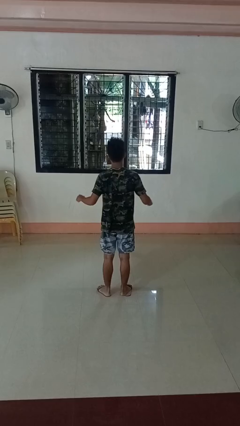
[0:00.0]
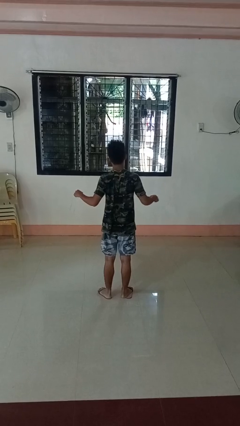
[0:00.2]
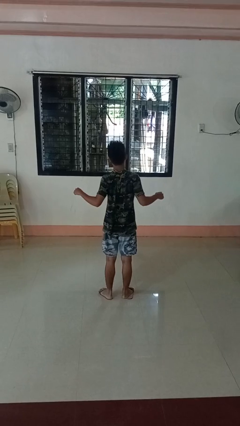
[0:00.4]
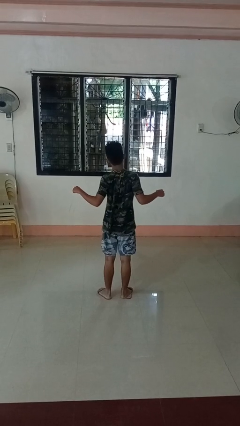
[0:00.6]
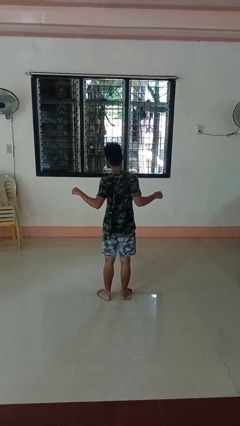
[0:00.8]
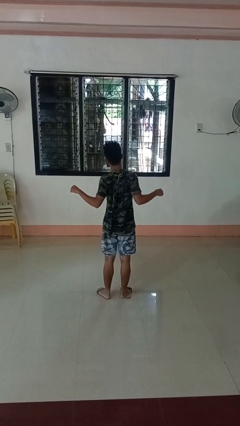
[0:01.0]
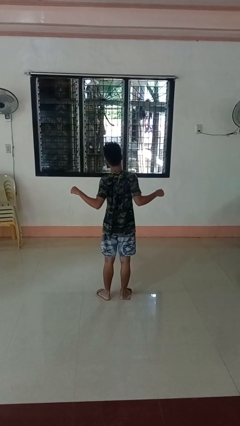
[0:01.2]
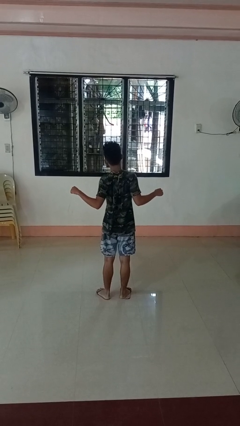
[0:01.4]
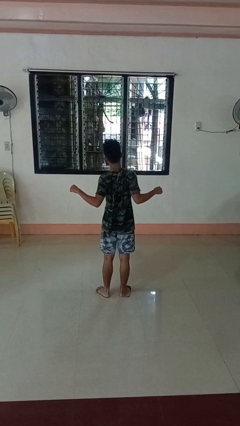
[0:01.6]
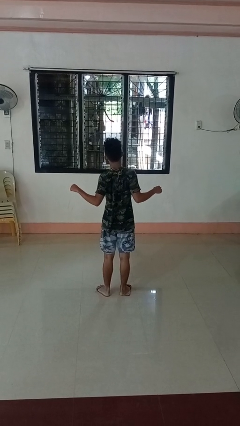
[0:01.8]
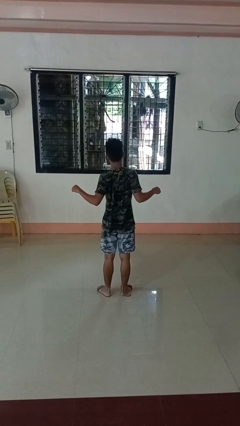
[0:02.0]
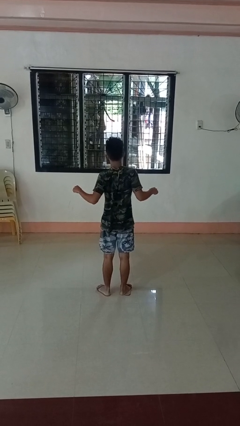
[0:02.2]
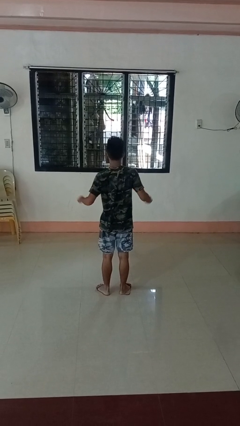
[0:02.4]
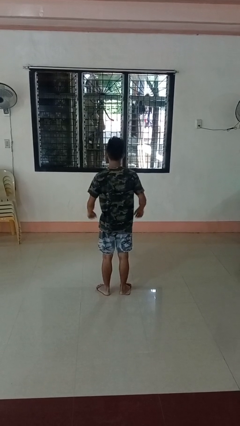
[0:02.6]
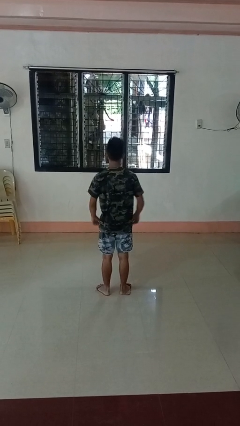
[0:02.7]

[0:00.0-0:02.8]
person stretches back

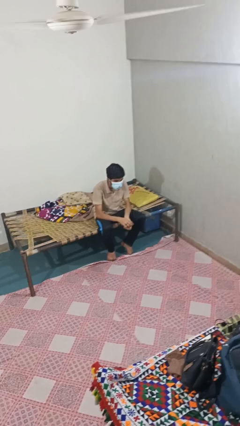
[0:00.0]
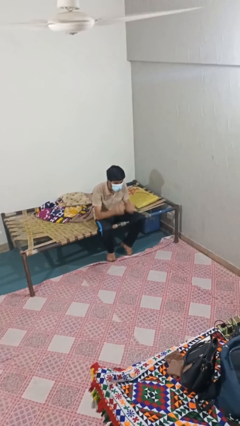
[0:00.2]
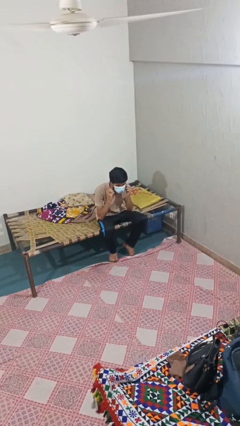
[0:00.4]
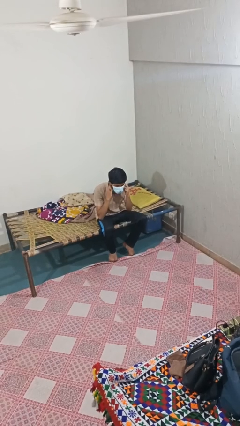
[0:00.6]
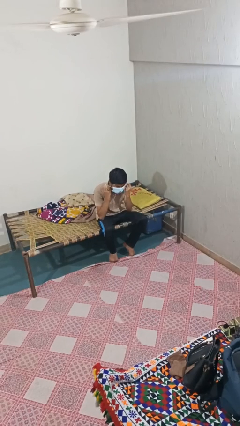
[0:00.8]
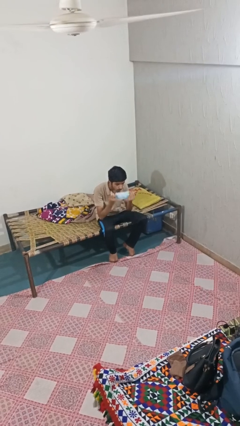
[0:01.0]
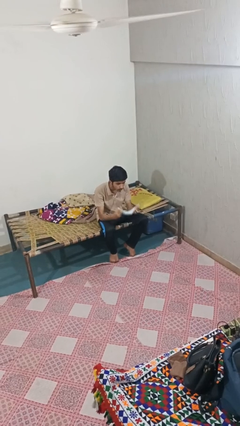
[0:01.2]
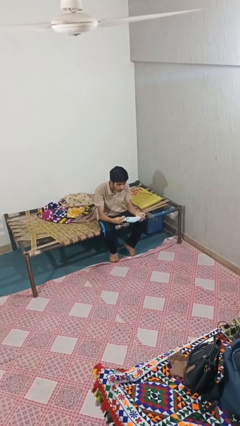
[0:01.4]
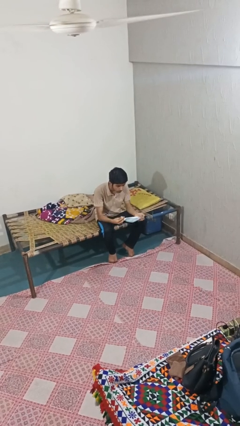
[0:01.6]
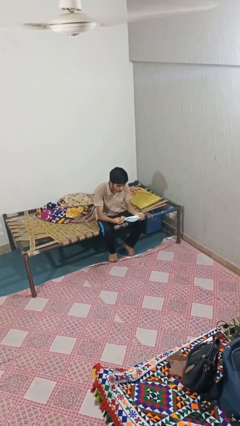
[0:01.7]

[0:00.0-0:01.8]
person takes off facemask

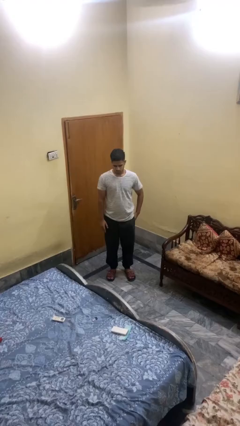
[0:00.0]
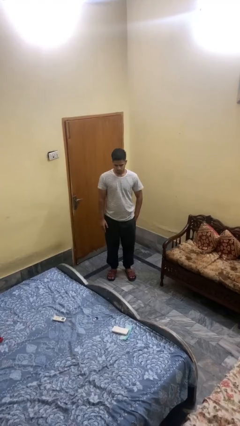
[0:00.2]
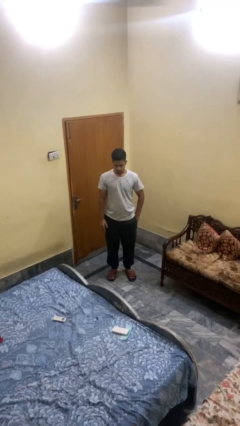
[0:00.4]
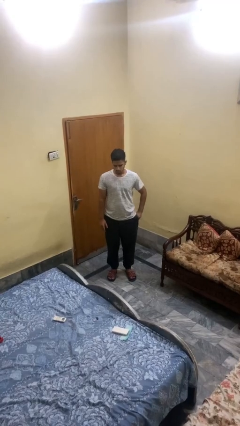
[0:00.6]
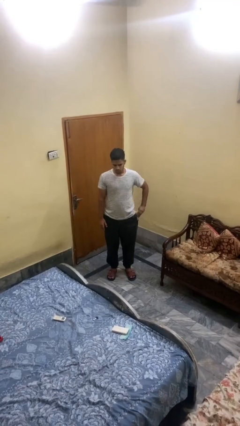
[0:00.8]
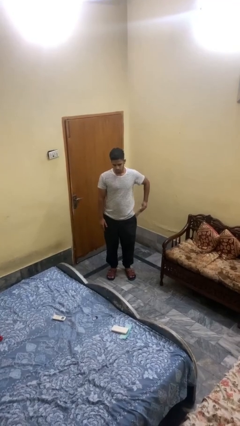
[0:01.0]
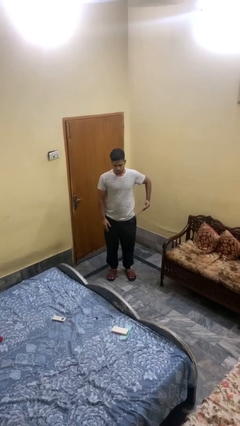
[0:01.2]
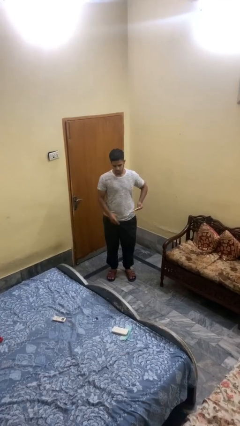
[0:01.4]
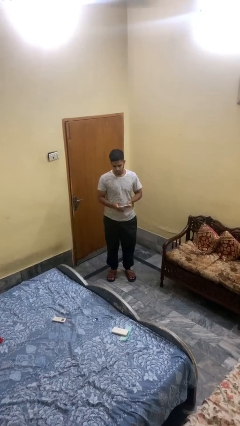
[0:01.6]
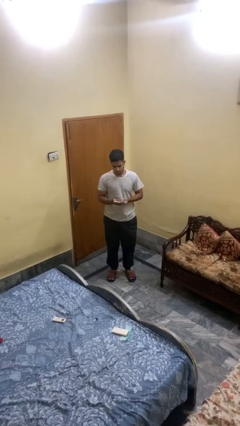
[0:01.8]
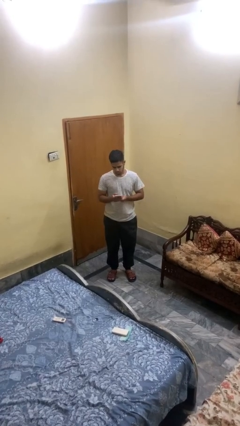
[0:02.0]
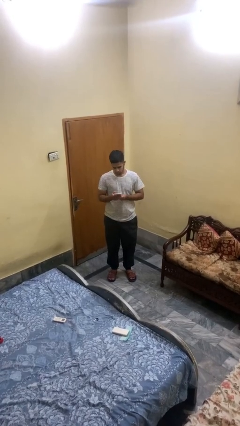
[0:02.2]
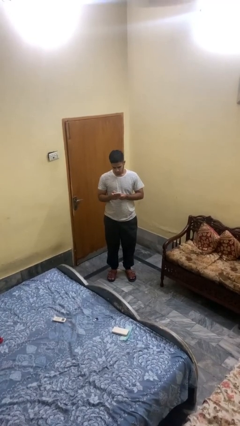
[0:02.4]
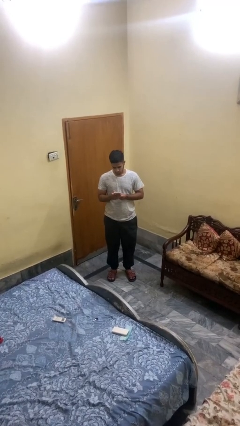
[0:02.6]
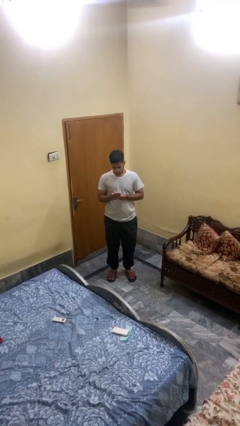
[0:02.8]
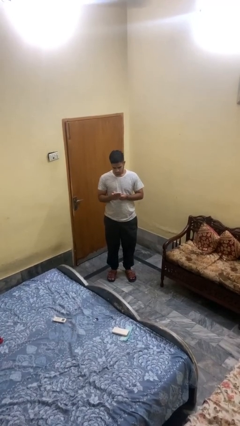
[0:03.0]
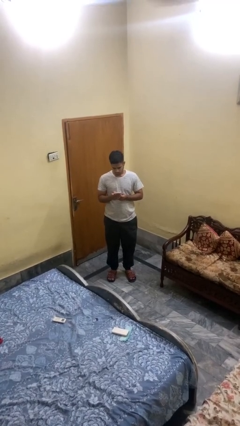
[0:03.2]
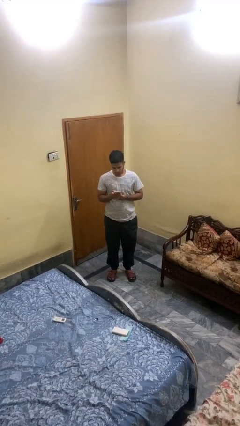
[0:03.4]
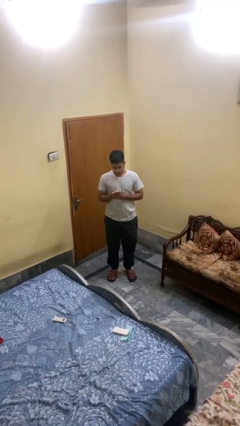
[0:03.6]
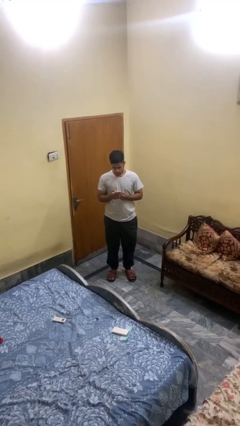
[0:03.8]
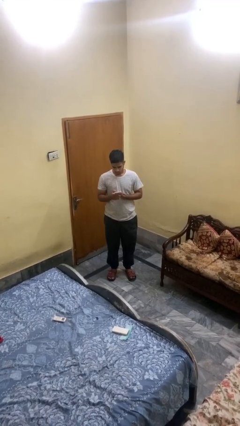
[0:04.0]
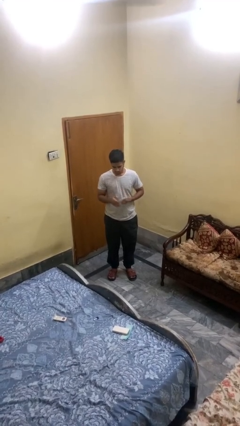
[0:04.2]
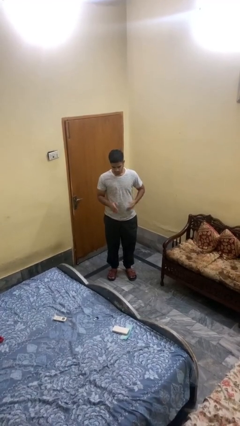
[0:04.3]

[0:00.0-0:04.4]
person takes phone from pocket

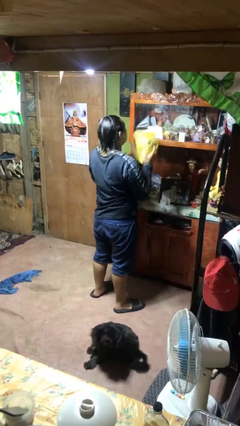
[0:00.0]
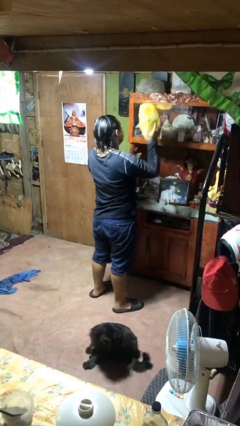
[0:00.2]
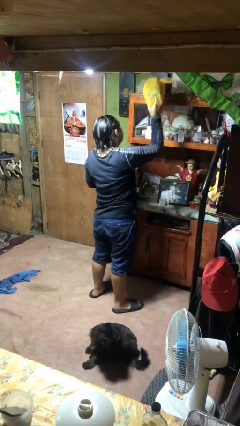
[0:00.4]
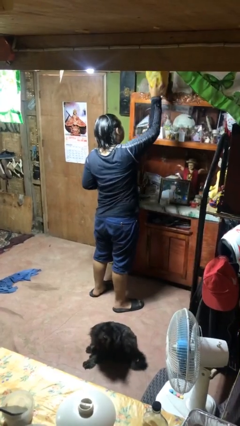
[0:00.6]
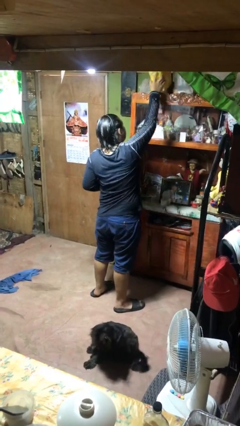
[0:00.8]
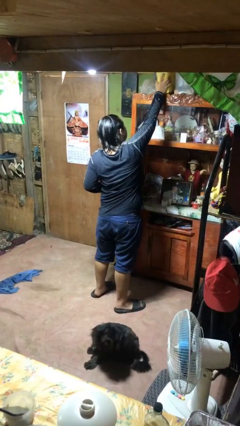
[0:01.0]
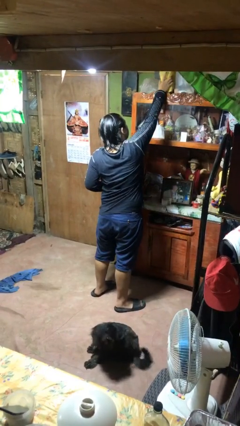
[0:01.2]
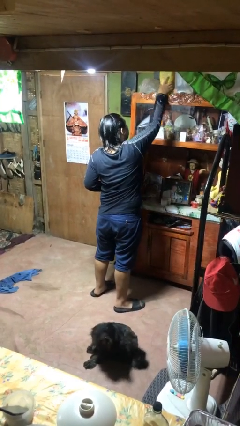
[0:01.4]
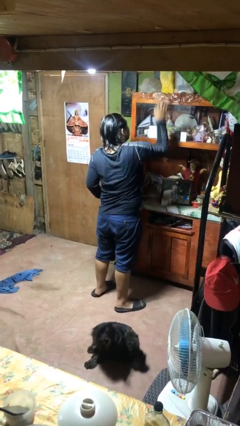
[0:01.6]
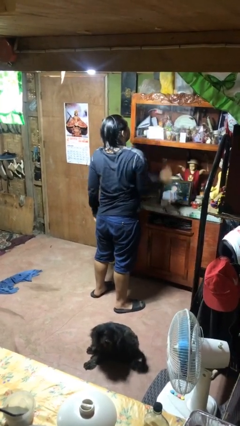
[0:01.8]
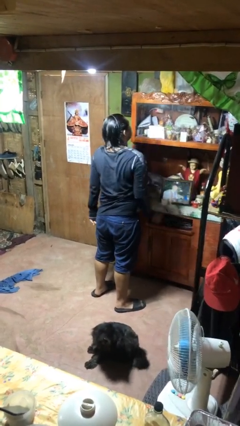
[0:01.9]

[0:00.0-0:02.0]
person puts down object on shelf

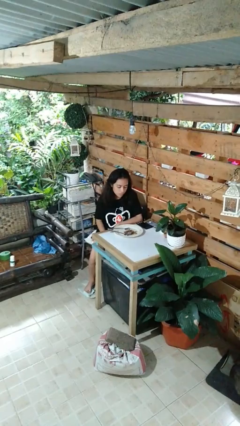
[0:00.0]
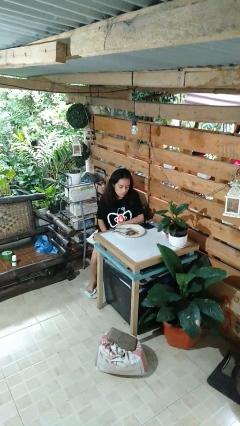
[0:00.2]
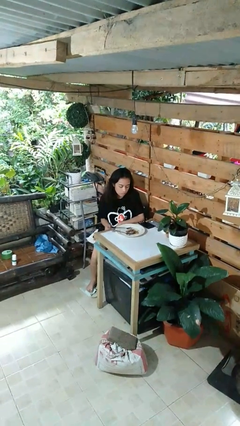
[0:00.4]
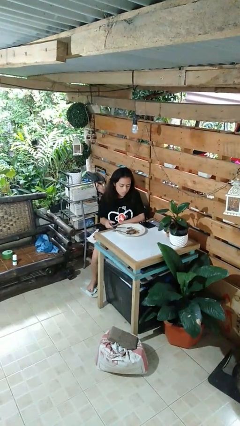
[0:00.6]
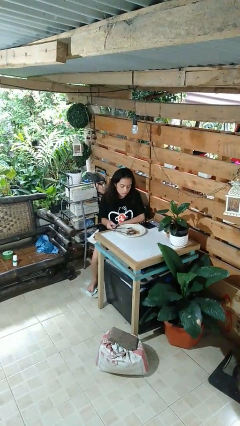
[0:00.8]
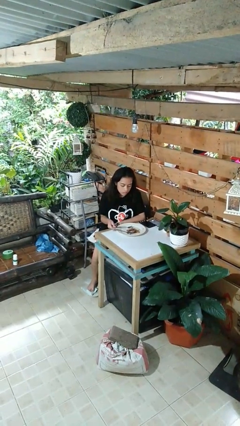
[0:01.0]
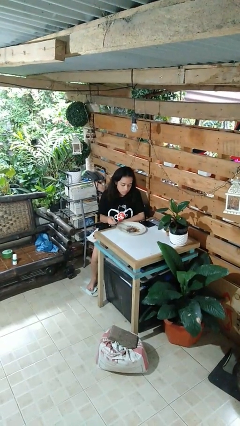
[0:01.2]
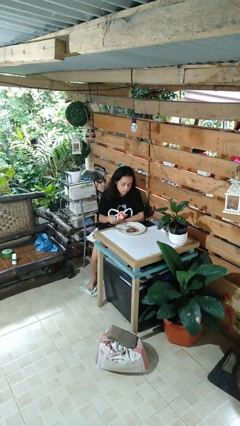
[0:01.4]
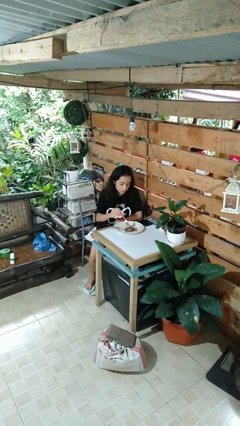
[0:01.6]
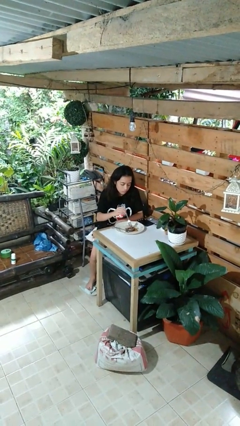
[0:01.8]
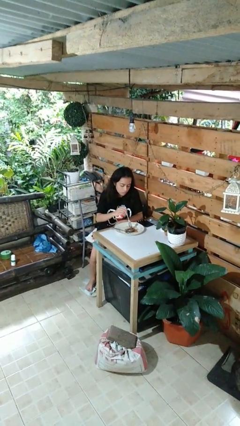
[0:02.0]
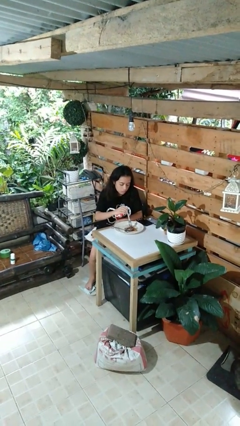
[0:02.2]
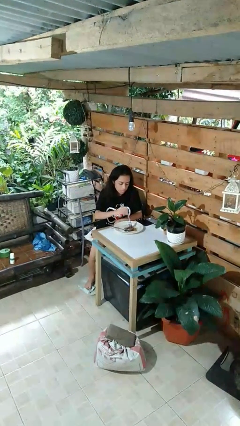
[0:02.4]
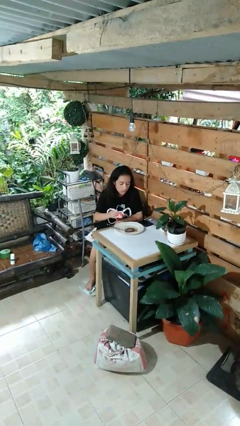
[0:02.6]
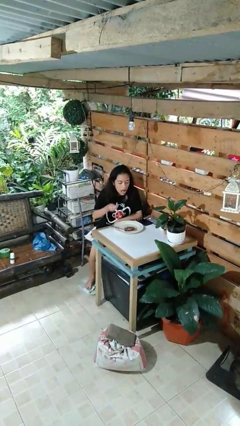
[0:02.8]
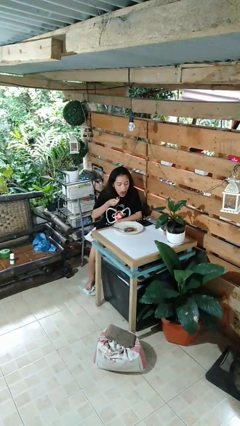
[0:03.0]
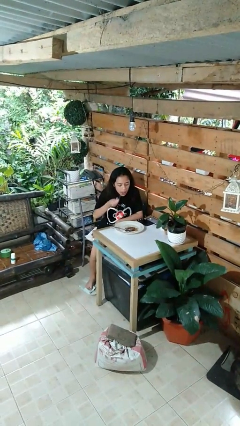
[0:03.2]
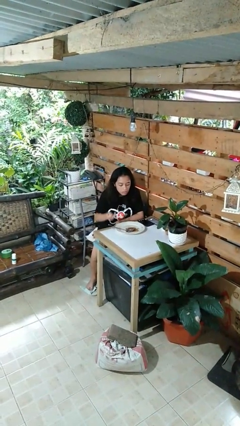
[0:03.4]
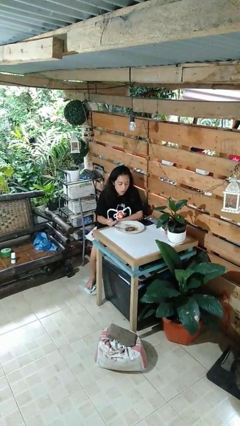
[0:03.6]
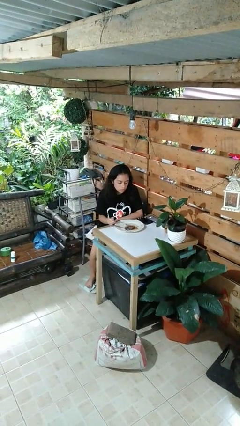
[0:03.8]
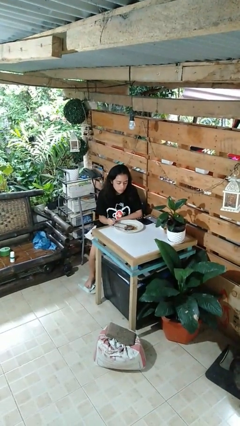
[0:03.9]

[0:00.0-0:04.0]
person eats with utensil

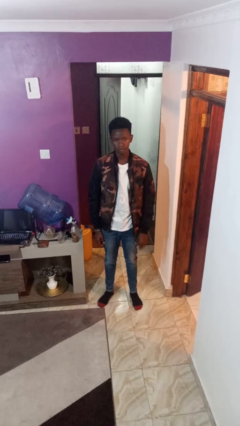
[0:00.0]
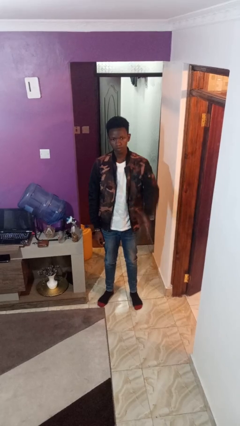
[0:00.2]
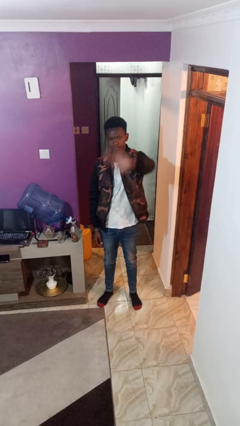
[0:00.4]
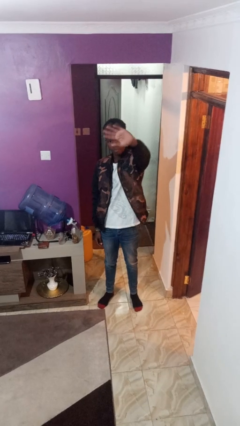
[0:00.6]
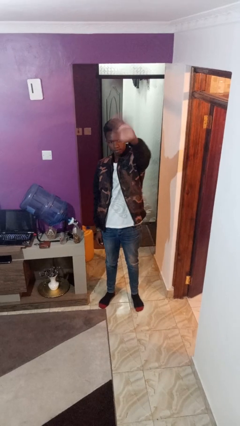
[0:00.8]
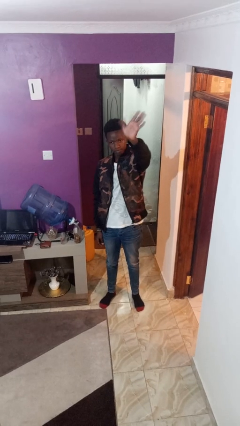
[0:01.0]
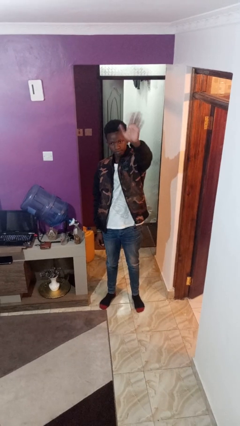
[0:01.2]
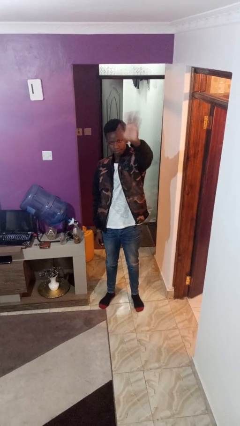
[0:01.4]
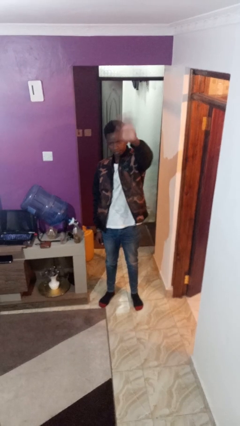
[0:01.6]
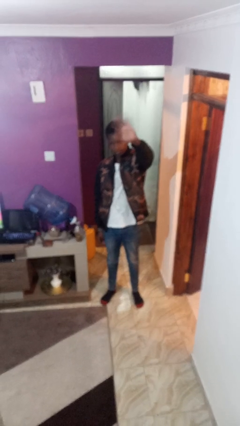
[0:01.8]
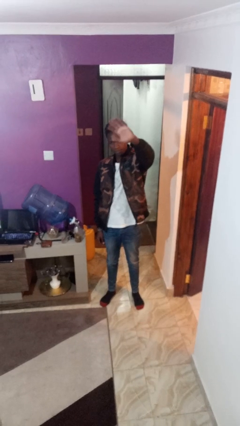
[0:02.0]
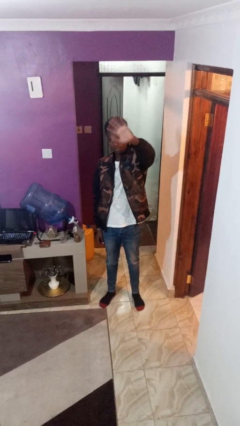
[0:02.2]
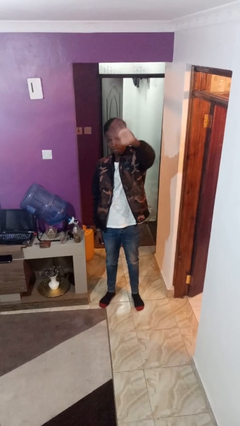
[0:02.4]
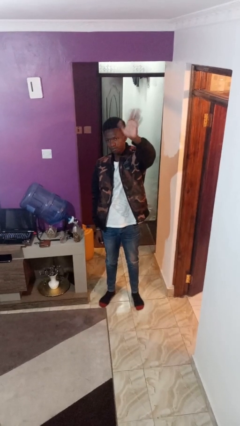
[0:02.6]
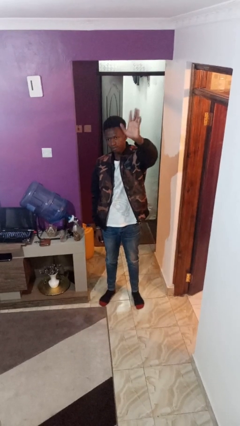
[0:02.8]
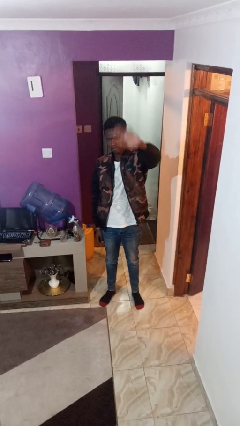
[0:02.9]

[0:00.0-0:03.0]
person waves at person
